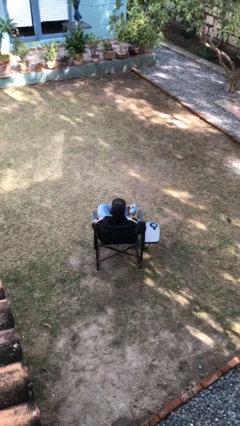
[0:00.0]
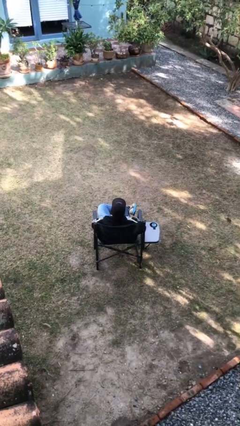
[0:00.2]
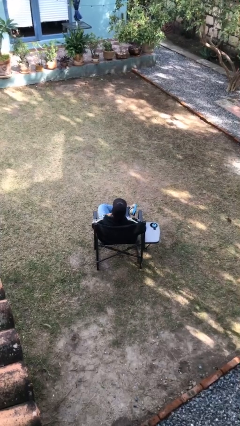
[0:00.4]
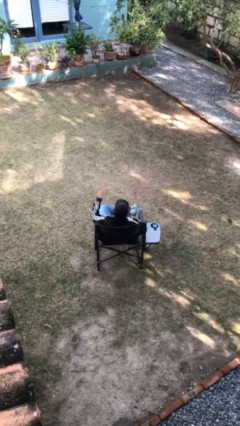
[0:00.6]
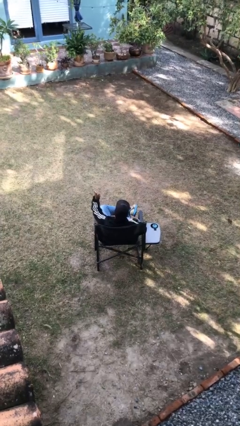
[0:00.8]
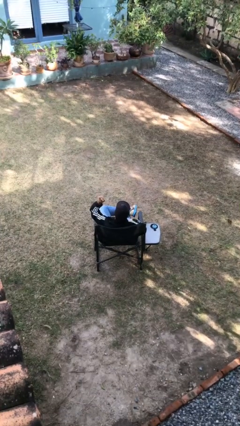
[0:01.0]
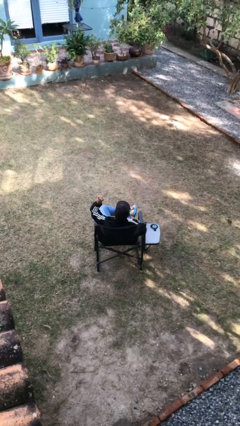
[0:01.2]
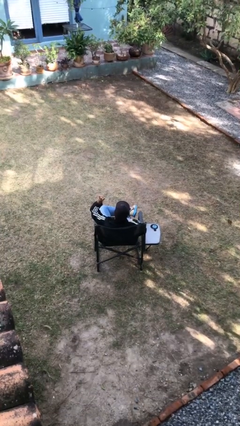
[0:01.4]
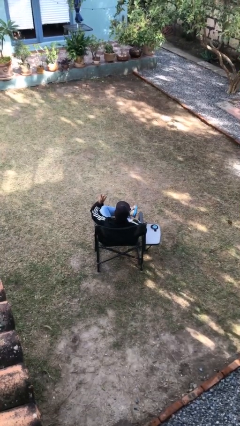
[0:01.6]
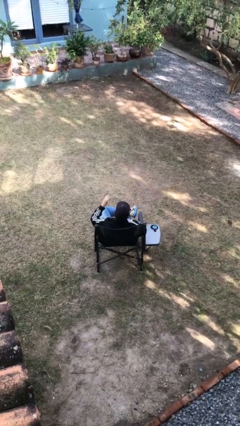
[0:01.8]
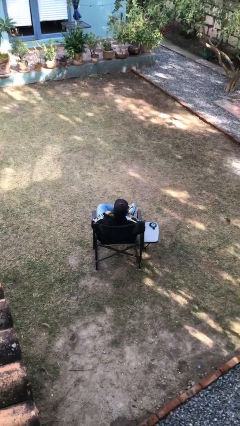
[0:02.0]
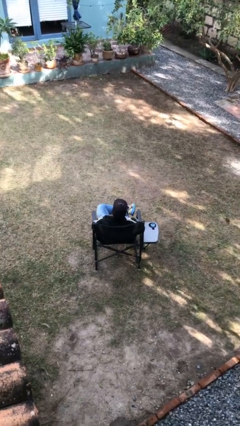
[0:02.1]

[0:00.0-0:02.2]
person gestures number three

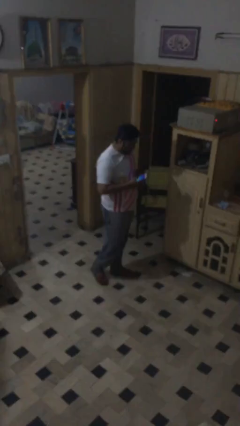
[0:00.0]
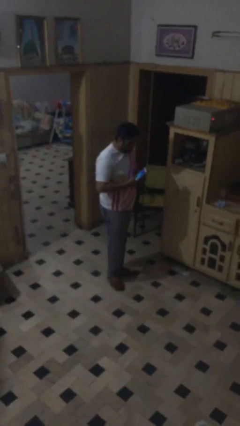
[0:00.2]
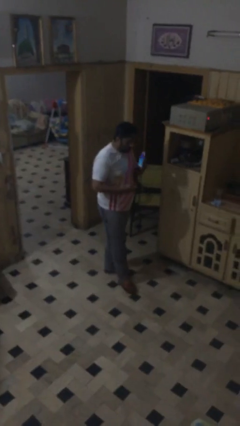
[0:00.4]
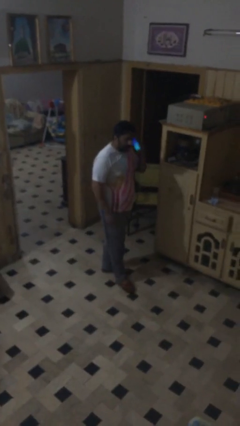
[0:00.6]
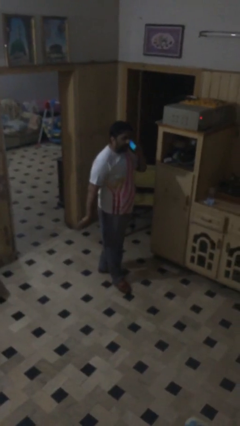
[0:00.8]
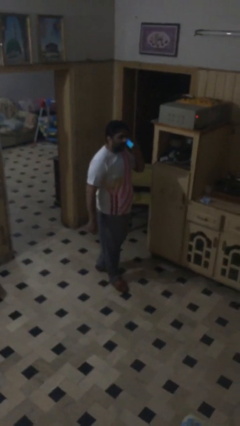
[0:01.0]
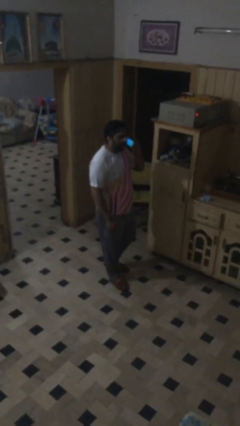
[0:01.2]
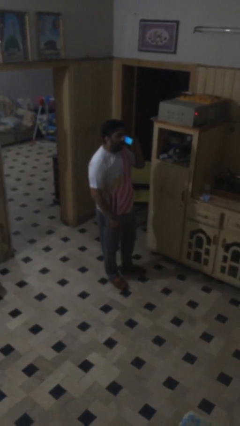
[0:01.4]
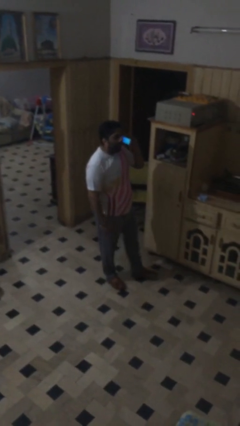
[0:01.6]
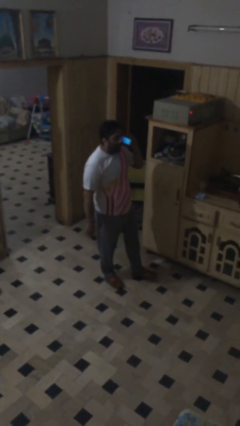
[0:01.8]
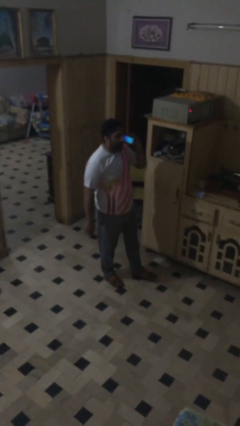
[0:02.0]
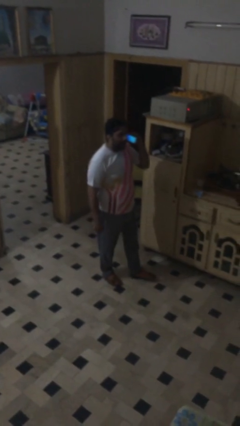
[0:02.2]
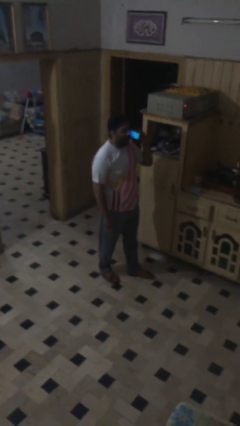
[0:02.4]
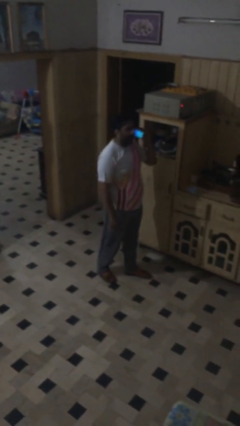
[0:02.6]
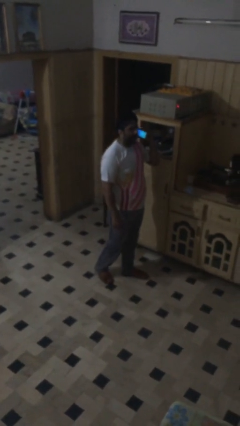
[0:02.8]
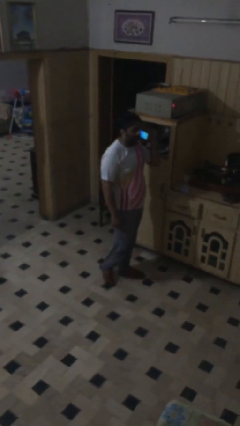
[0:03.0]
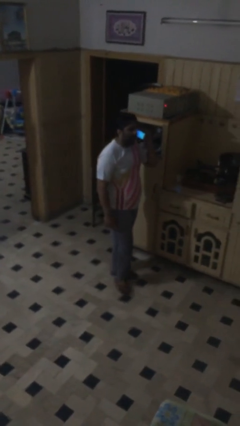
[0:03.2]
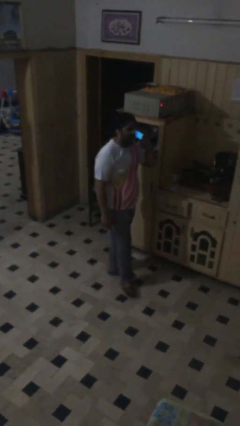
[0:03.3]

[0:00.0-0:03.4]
person talks on phone

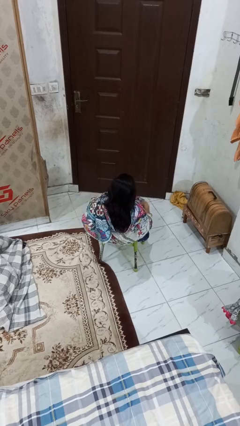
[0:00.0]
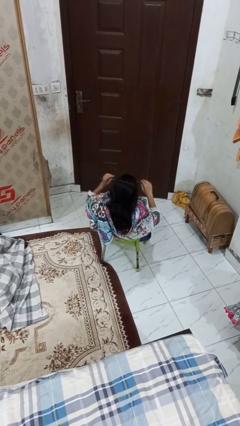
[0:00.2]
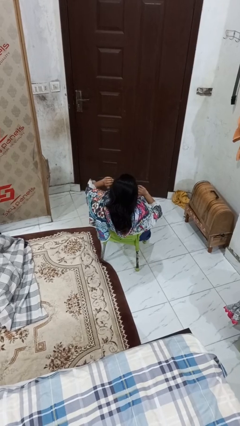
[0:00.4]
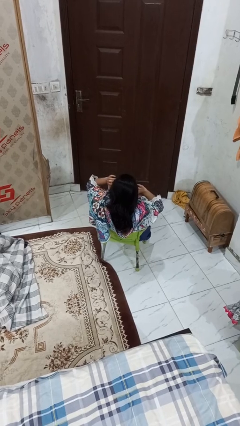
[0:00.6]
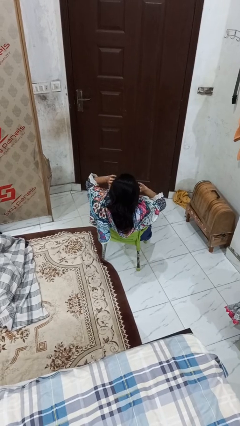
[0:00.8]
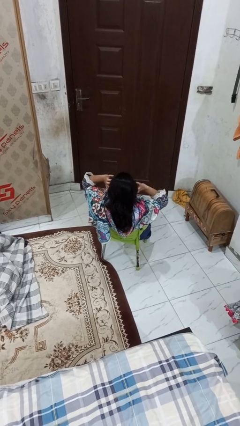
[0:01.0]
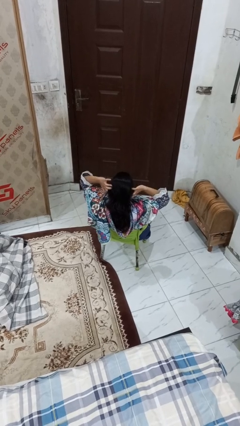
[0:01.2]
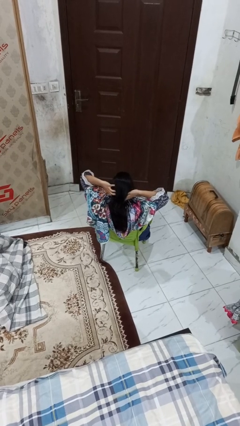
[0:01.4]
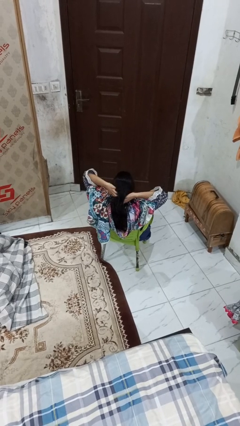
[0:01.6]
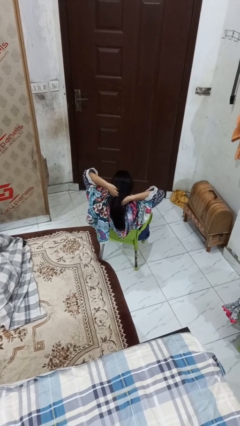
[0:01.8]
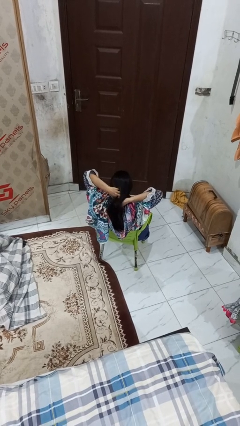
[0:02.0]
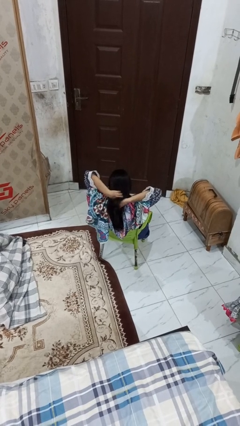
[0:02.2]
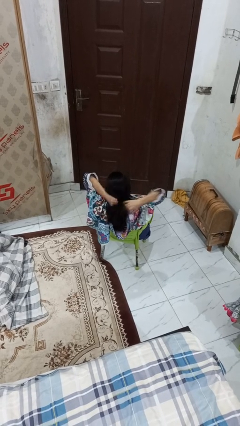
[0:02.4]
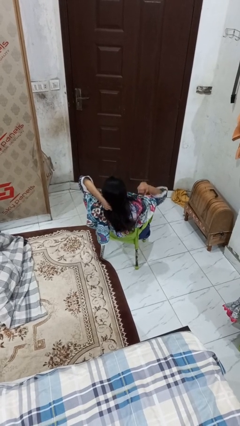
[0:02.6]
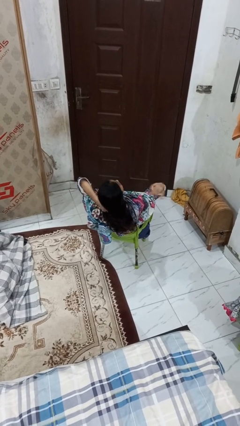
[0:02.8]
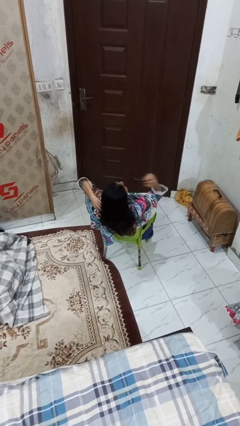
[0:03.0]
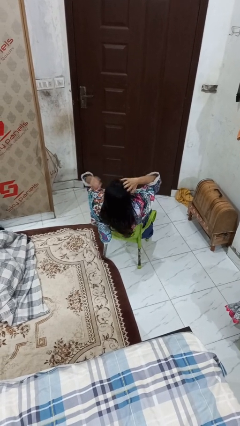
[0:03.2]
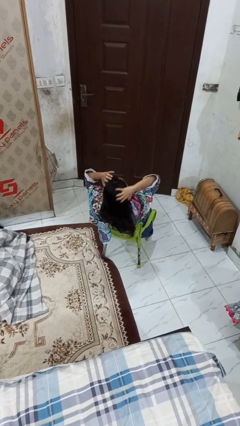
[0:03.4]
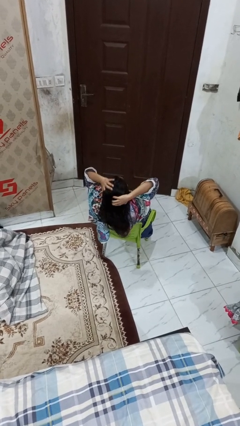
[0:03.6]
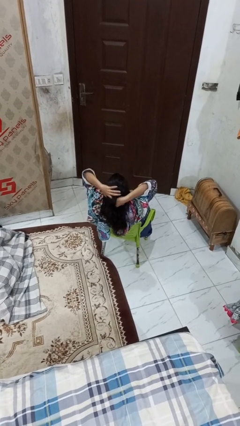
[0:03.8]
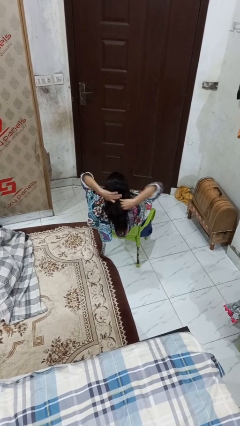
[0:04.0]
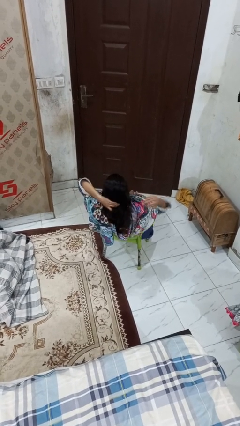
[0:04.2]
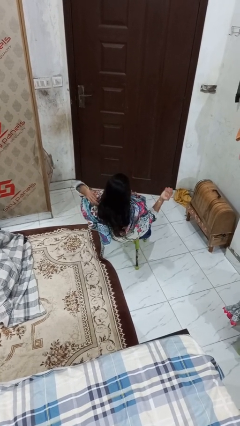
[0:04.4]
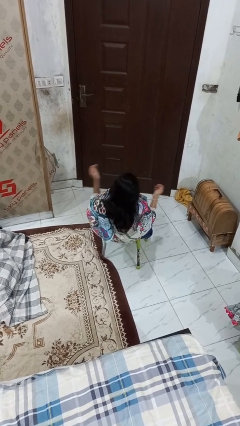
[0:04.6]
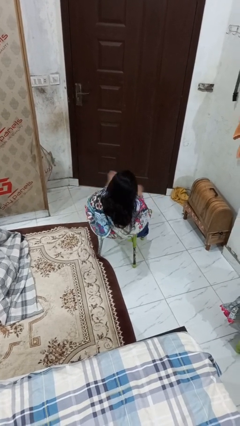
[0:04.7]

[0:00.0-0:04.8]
person strokes hair

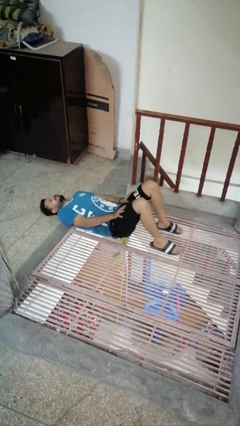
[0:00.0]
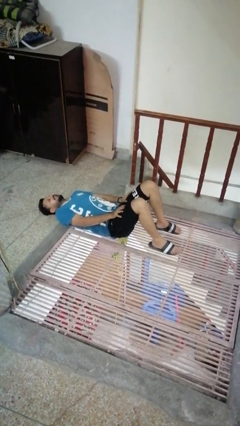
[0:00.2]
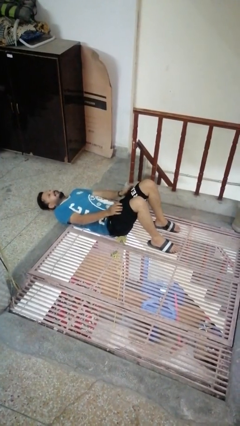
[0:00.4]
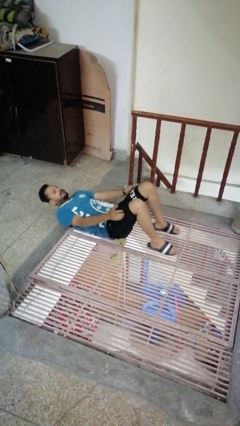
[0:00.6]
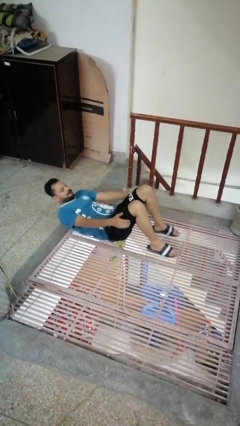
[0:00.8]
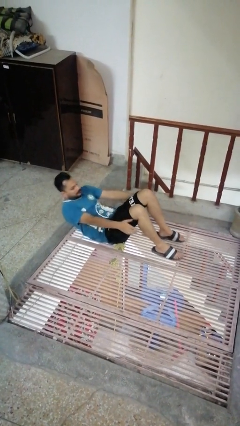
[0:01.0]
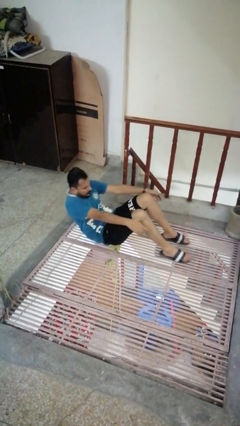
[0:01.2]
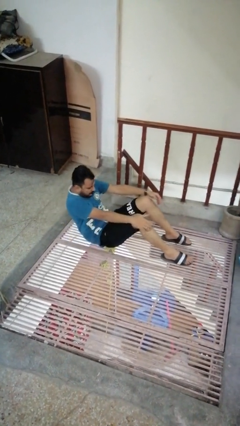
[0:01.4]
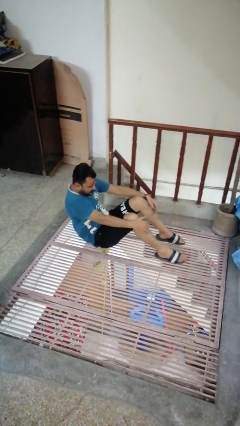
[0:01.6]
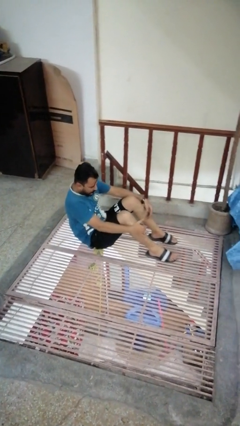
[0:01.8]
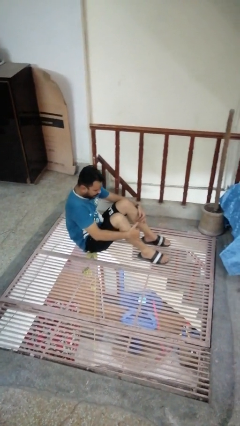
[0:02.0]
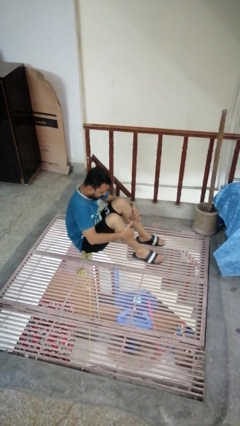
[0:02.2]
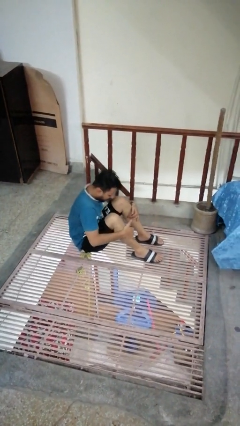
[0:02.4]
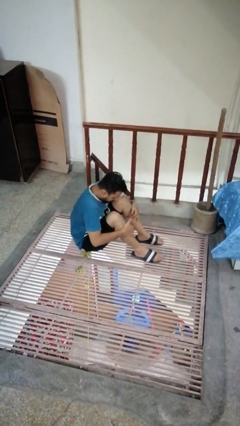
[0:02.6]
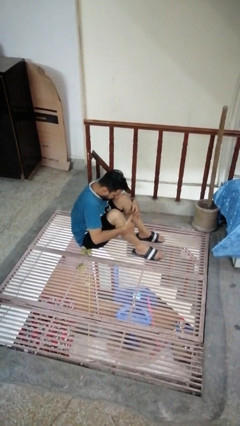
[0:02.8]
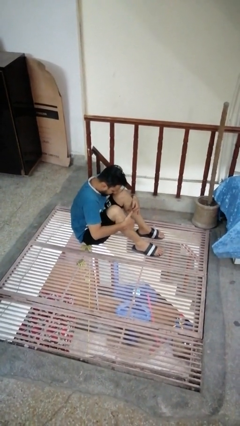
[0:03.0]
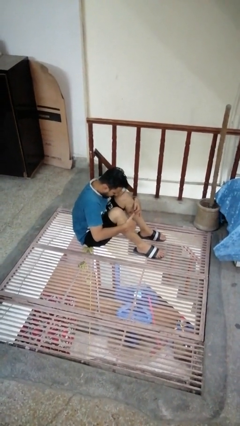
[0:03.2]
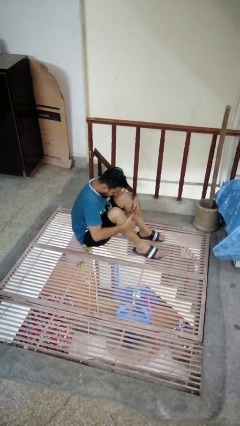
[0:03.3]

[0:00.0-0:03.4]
person exercises with situp

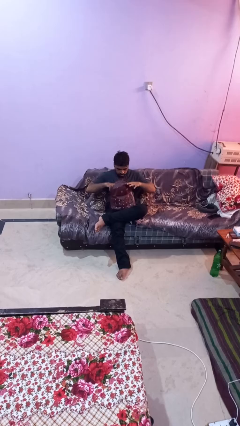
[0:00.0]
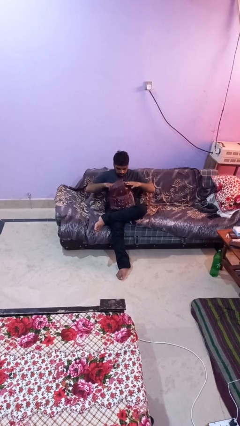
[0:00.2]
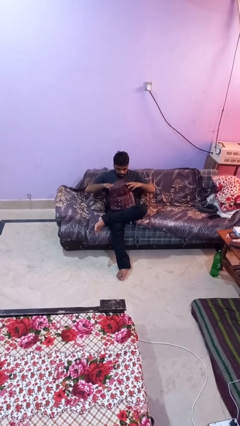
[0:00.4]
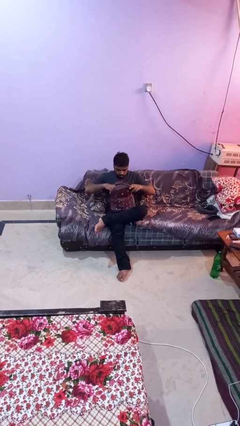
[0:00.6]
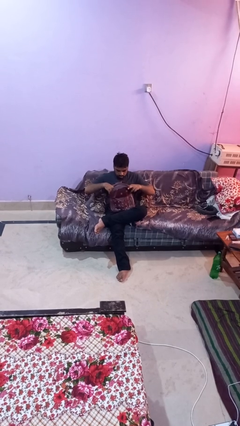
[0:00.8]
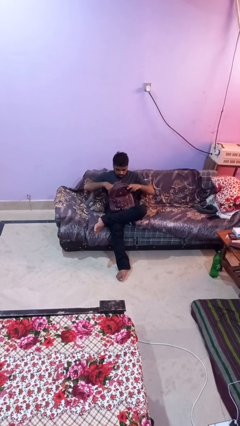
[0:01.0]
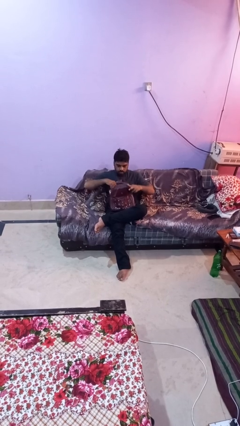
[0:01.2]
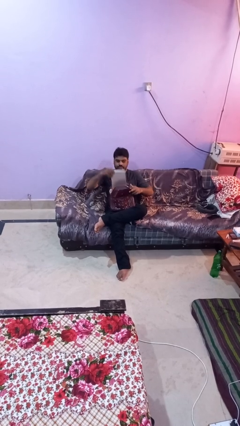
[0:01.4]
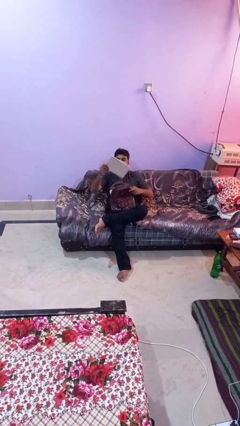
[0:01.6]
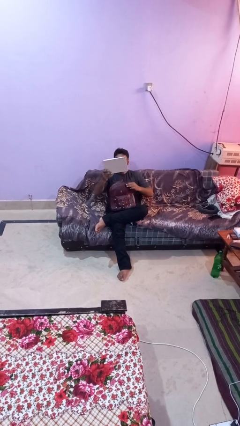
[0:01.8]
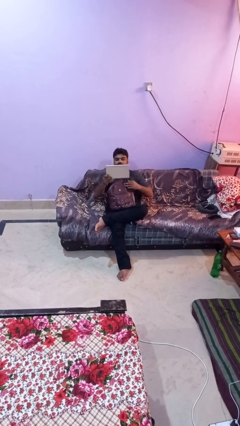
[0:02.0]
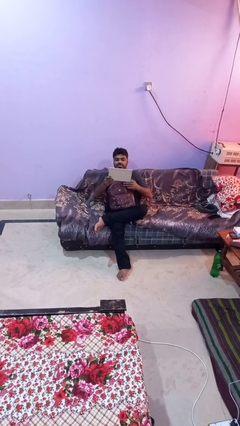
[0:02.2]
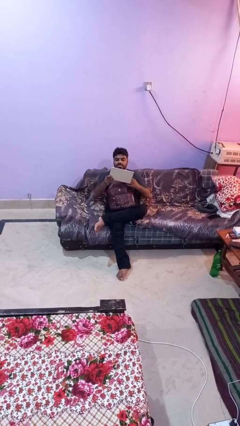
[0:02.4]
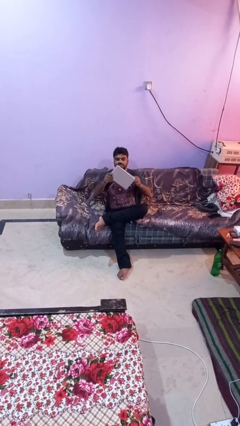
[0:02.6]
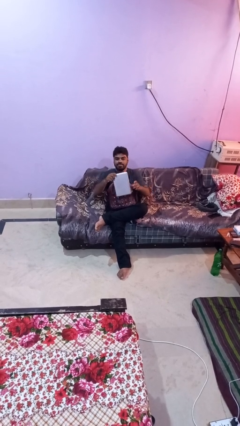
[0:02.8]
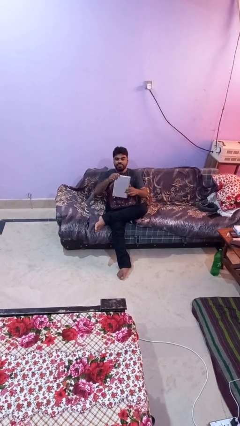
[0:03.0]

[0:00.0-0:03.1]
person takes object from backpack

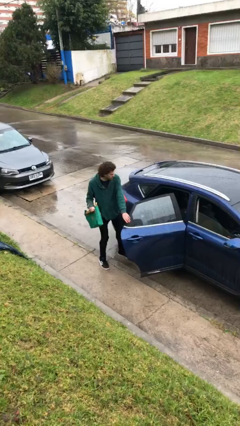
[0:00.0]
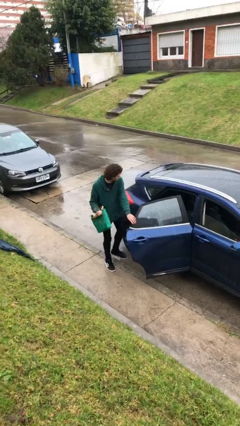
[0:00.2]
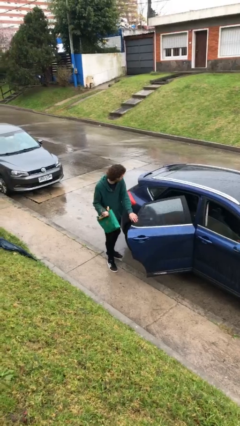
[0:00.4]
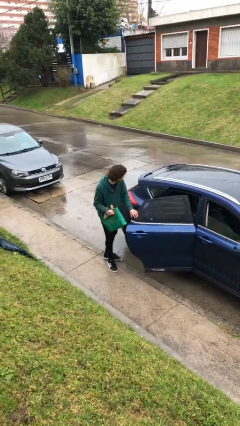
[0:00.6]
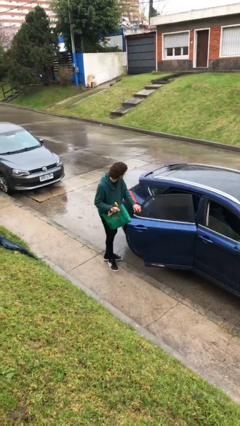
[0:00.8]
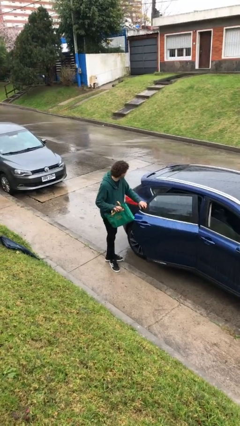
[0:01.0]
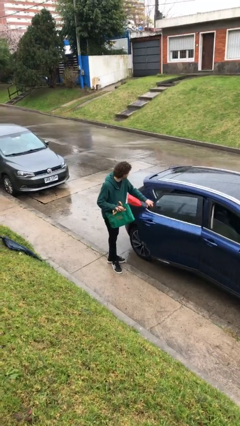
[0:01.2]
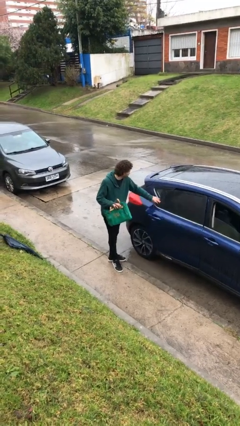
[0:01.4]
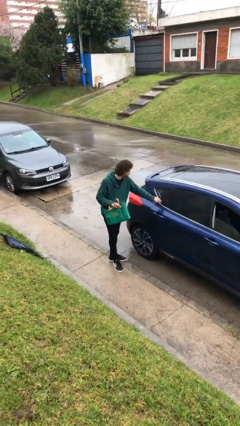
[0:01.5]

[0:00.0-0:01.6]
person closes car door
